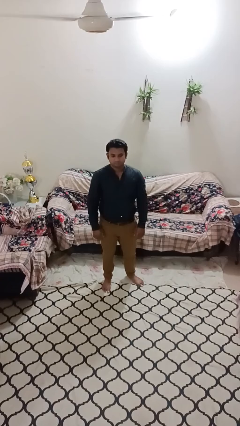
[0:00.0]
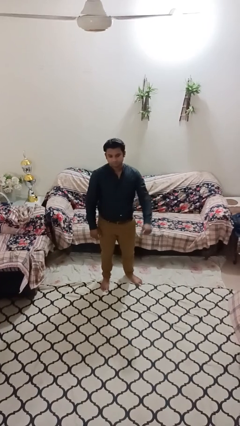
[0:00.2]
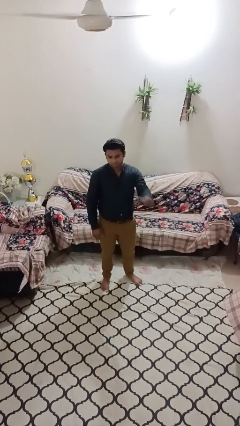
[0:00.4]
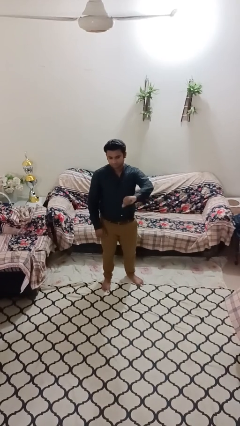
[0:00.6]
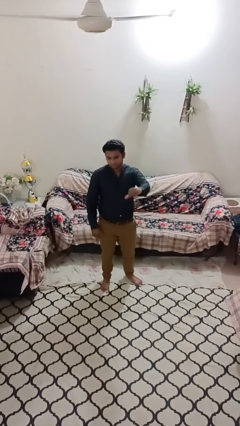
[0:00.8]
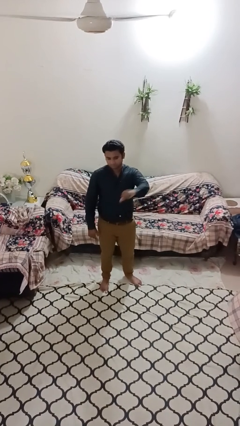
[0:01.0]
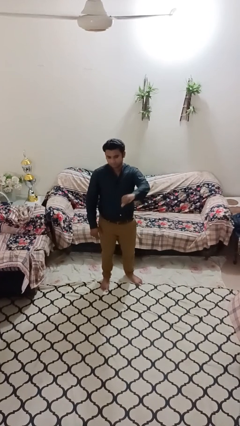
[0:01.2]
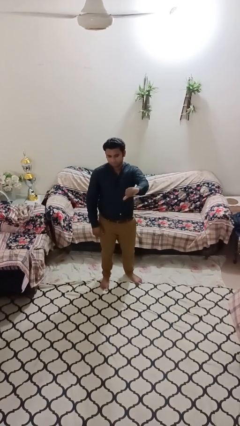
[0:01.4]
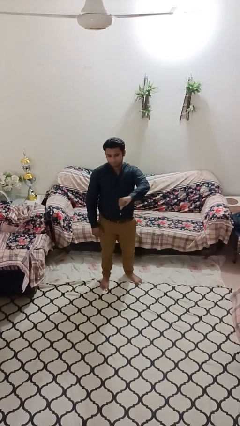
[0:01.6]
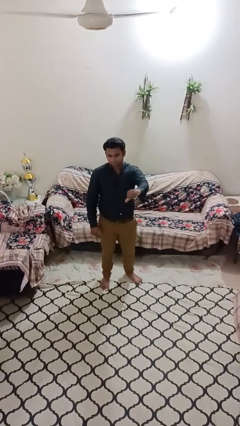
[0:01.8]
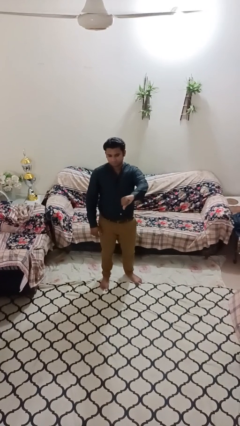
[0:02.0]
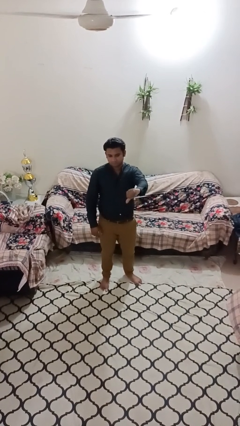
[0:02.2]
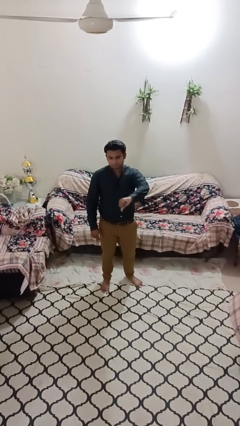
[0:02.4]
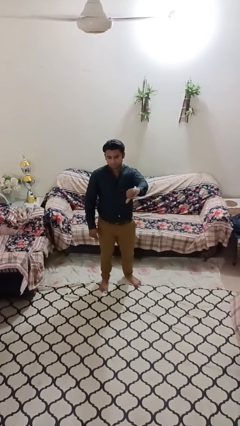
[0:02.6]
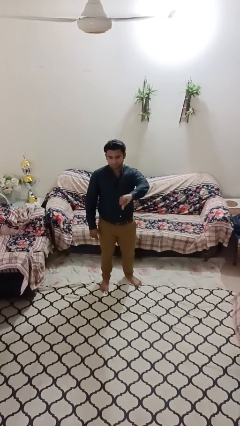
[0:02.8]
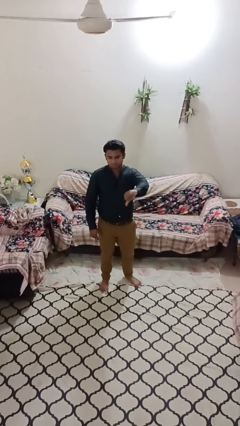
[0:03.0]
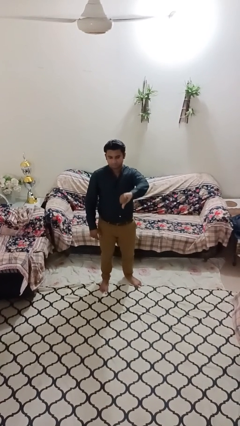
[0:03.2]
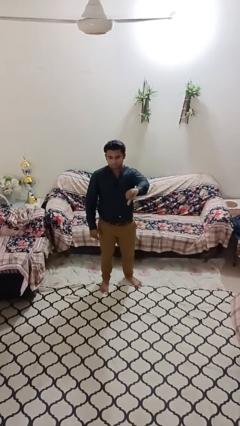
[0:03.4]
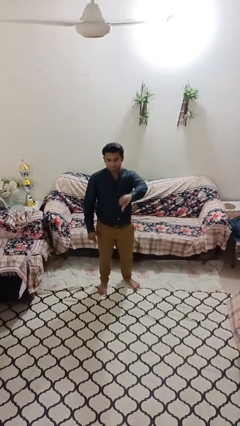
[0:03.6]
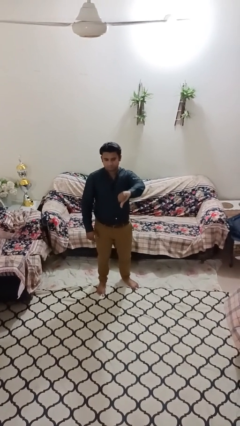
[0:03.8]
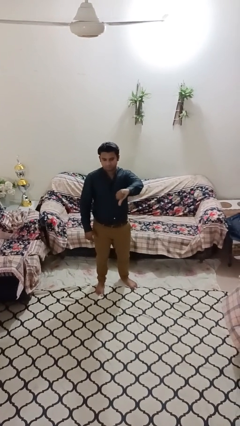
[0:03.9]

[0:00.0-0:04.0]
person gestures thumbs down

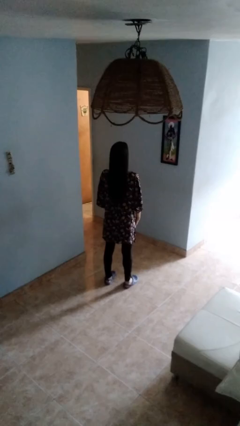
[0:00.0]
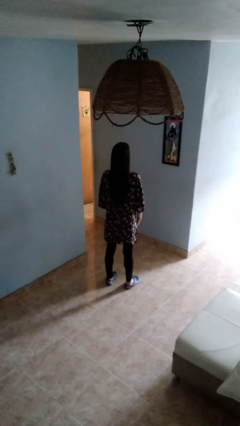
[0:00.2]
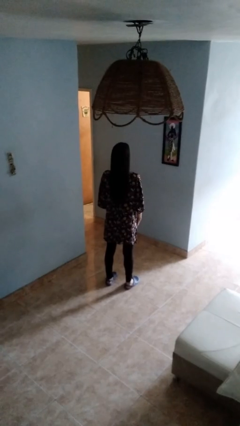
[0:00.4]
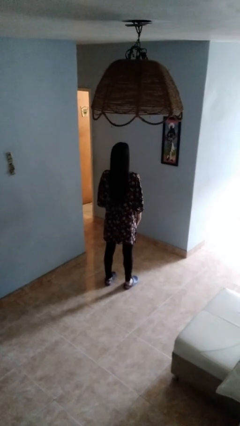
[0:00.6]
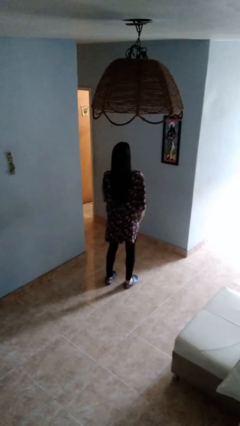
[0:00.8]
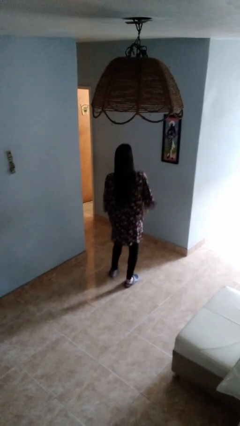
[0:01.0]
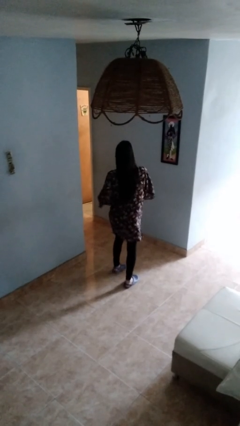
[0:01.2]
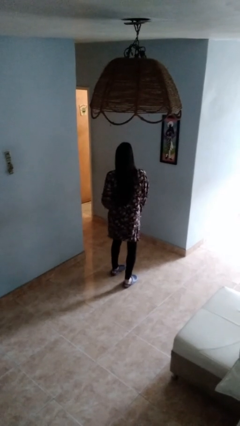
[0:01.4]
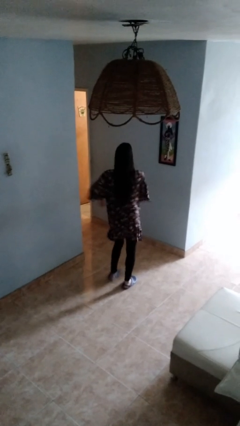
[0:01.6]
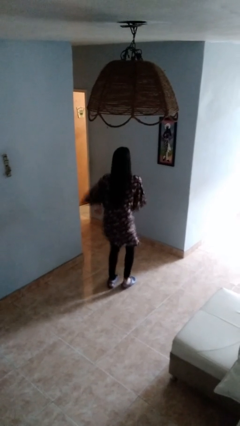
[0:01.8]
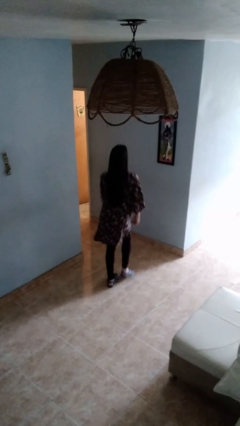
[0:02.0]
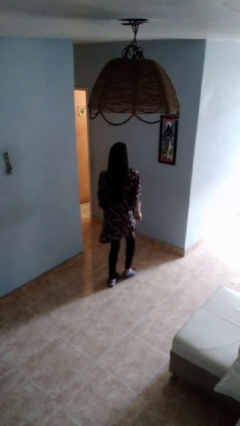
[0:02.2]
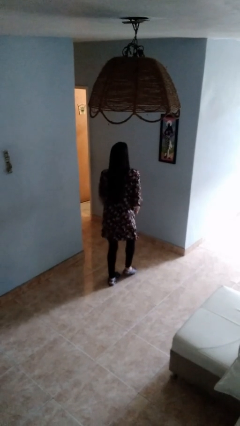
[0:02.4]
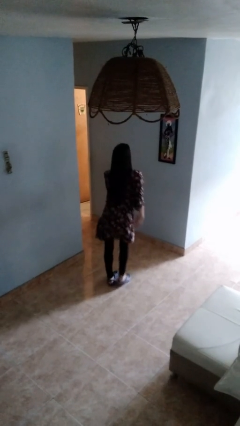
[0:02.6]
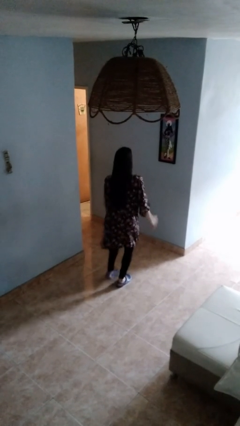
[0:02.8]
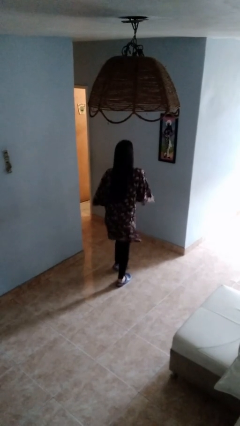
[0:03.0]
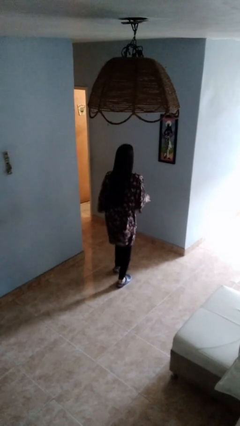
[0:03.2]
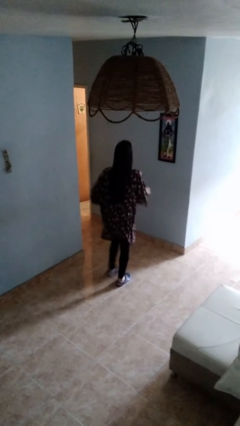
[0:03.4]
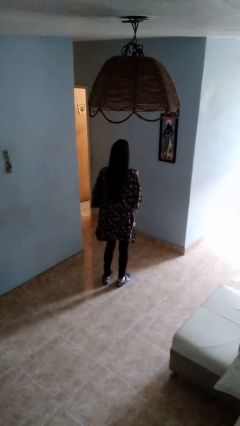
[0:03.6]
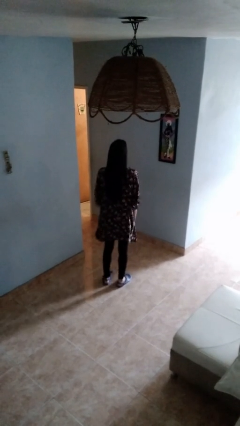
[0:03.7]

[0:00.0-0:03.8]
person dances in place

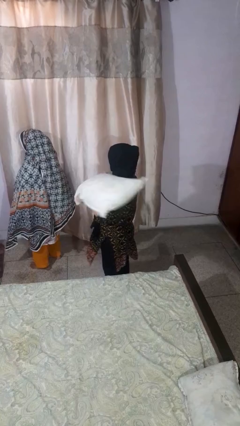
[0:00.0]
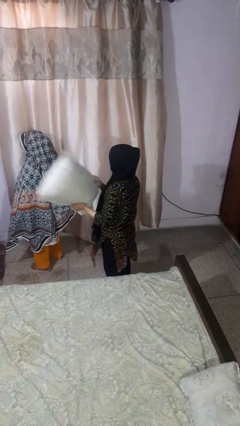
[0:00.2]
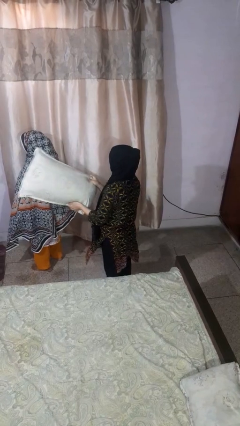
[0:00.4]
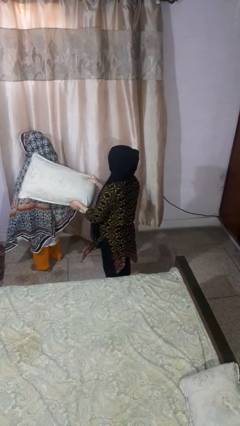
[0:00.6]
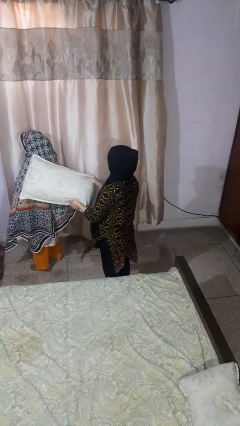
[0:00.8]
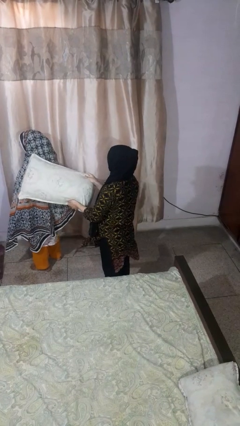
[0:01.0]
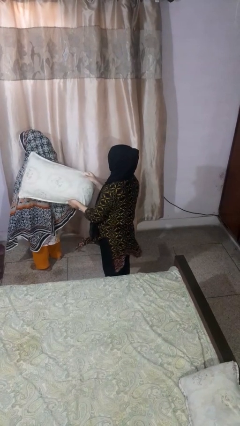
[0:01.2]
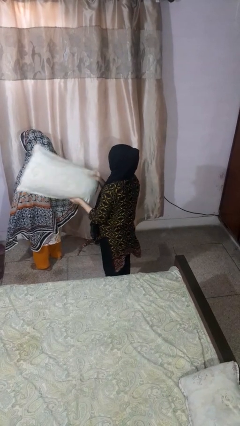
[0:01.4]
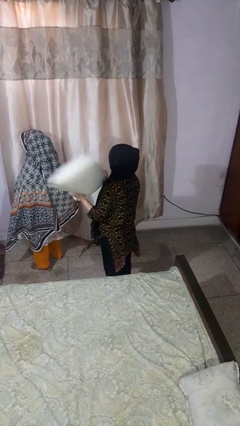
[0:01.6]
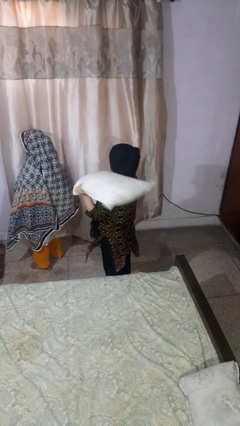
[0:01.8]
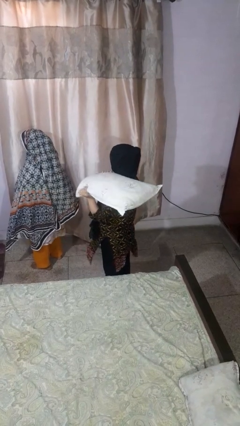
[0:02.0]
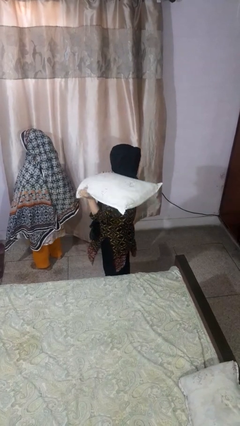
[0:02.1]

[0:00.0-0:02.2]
person hits person with pillow

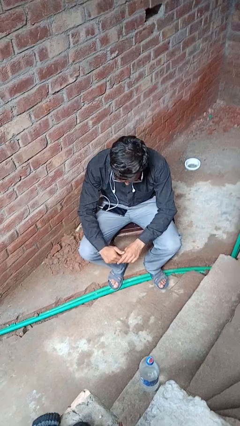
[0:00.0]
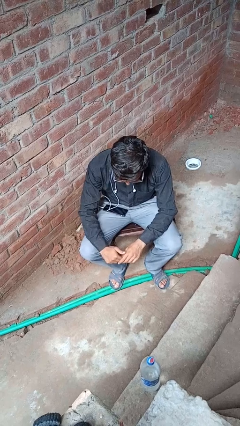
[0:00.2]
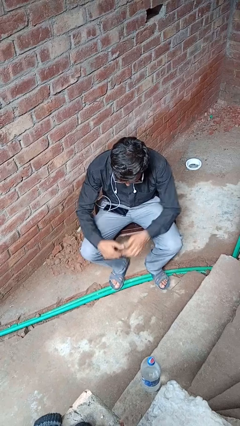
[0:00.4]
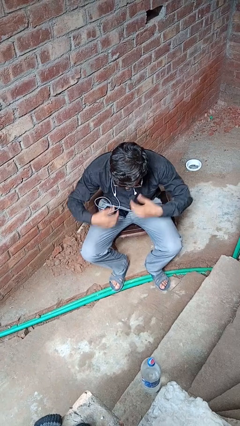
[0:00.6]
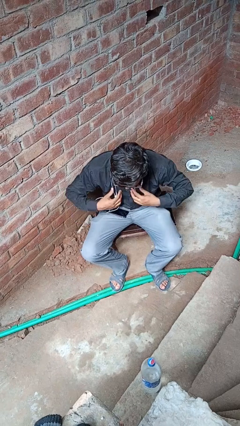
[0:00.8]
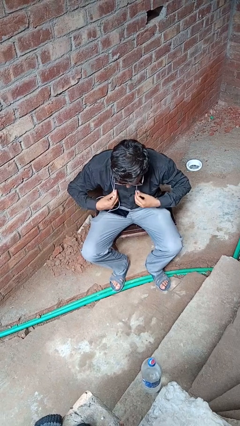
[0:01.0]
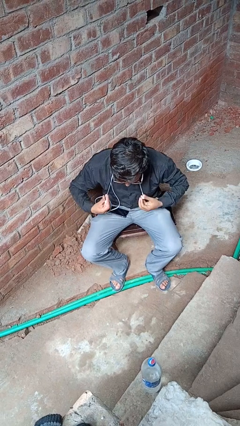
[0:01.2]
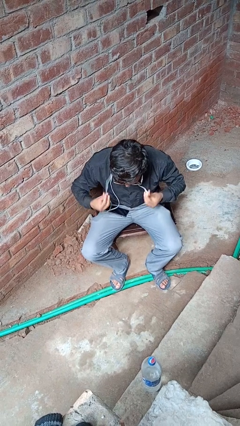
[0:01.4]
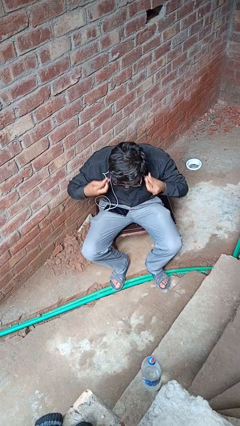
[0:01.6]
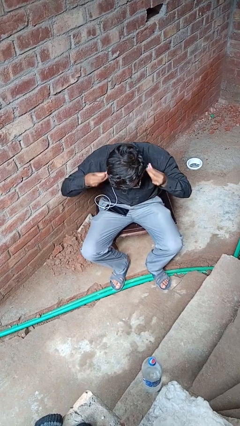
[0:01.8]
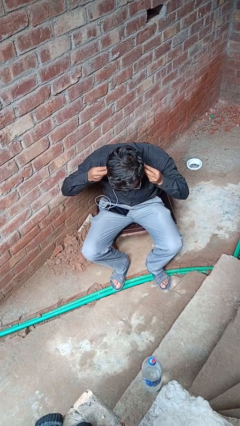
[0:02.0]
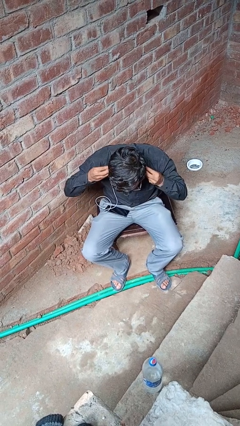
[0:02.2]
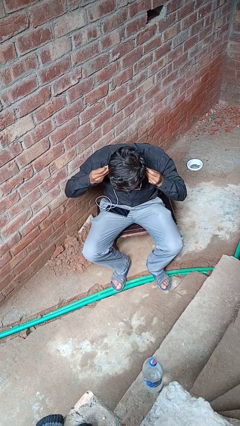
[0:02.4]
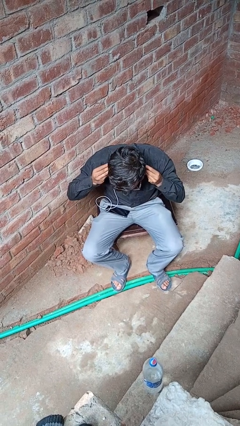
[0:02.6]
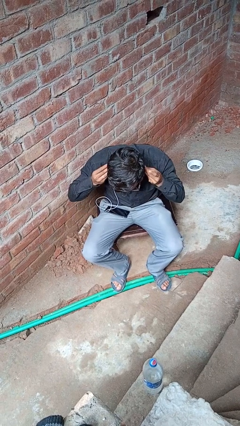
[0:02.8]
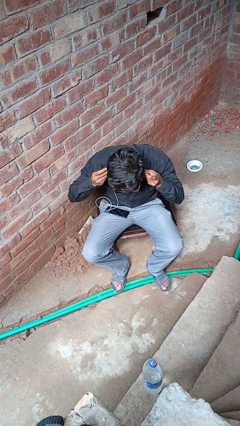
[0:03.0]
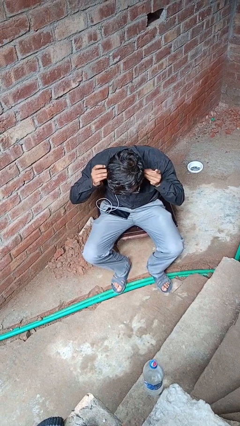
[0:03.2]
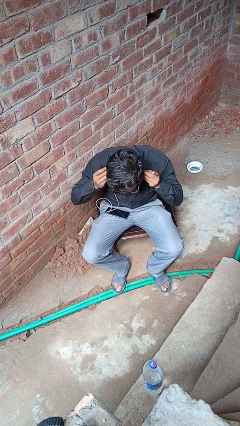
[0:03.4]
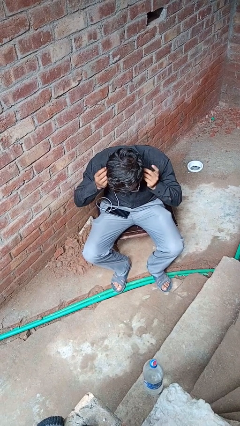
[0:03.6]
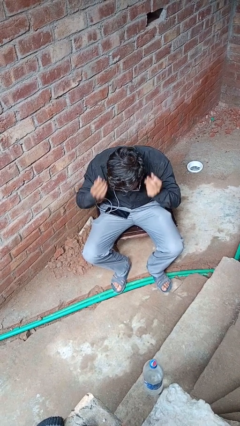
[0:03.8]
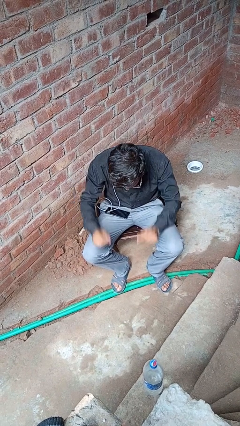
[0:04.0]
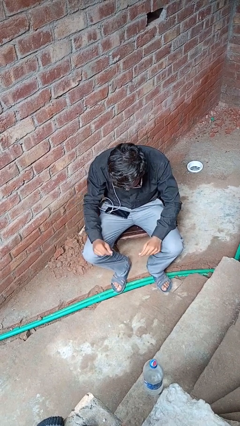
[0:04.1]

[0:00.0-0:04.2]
person puts on headphones

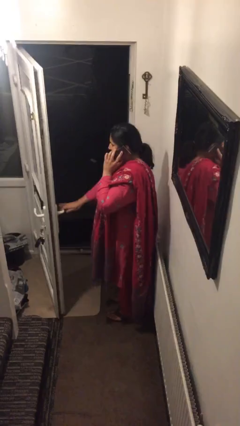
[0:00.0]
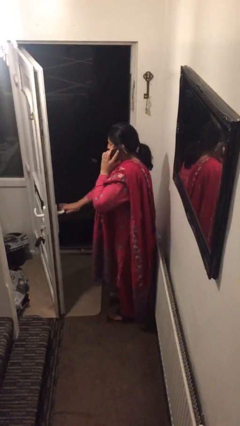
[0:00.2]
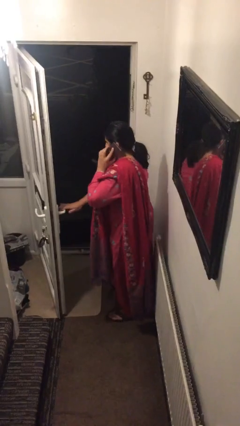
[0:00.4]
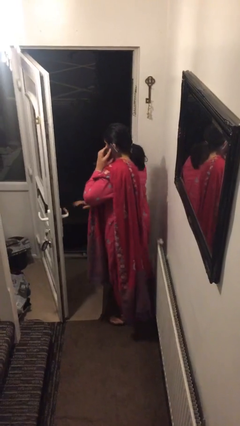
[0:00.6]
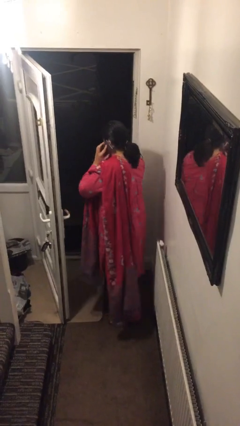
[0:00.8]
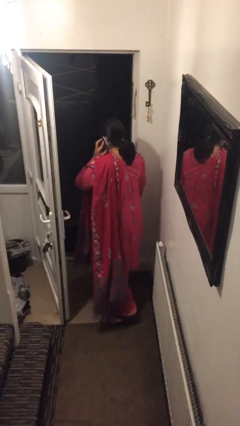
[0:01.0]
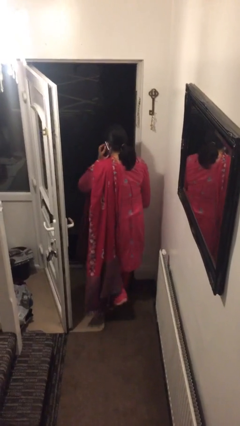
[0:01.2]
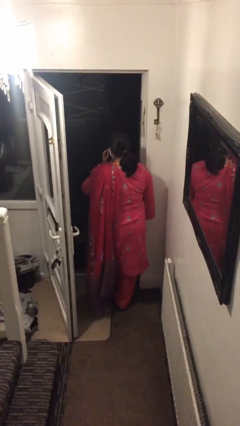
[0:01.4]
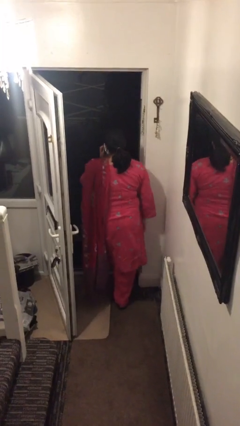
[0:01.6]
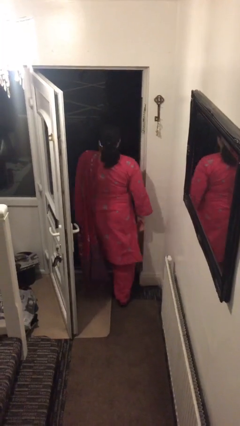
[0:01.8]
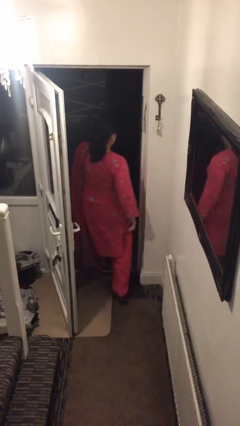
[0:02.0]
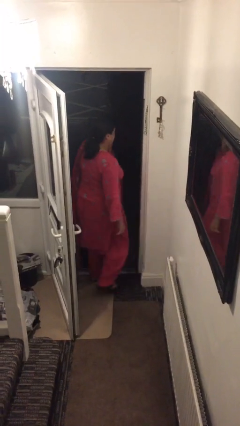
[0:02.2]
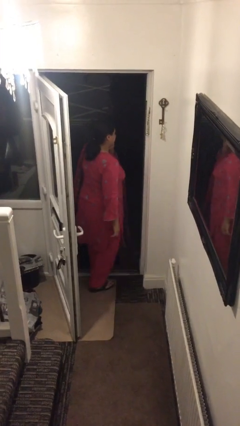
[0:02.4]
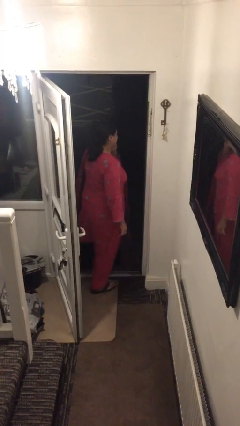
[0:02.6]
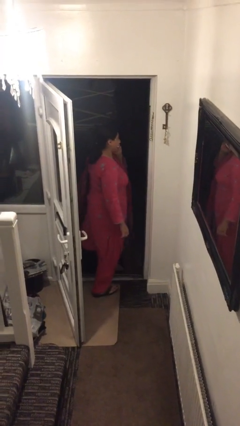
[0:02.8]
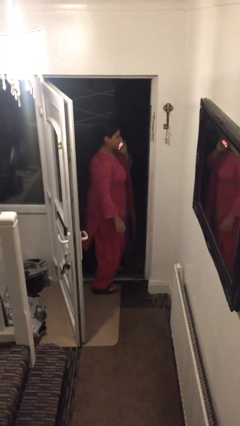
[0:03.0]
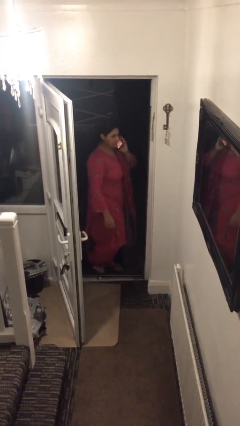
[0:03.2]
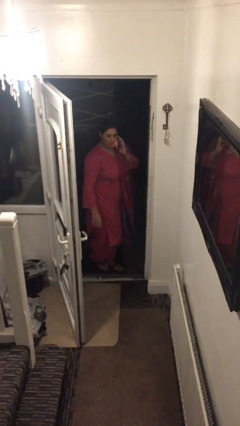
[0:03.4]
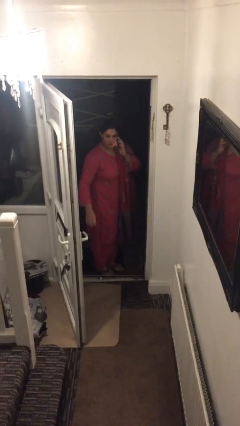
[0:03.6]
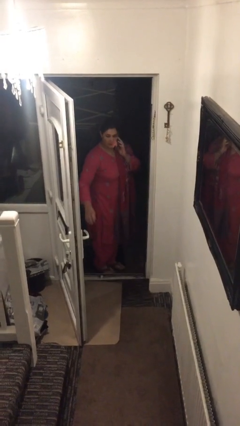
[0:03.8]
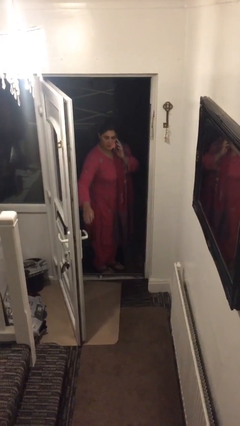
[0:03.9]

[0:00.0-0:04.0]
person exits scene through structure
